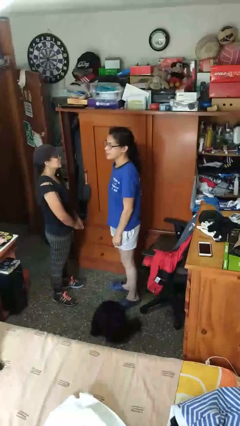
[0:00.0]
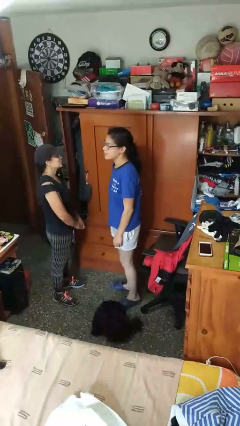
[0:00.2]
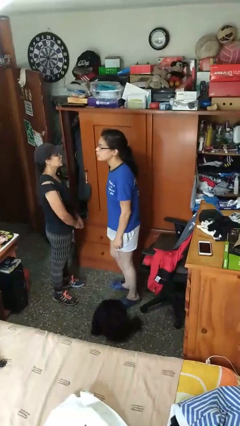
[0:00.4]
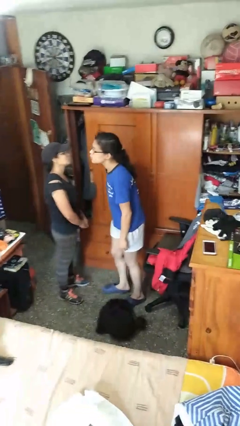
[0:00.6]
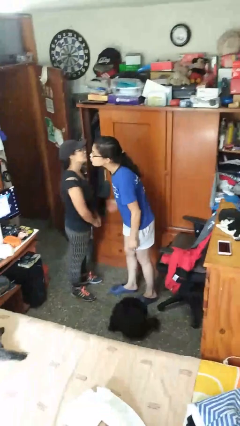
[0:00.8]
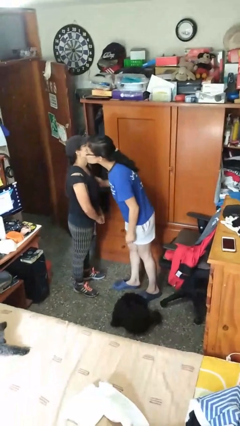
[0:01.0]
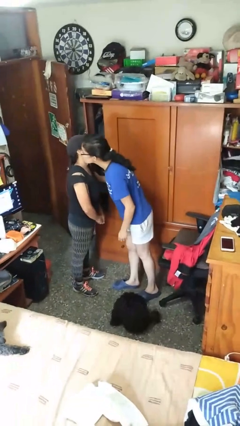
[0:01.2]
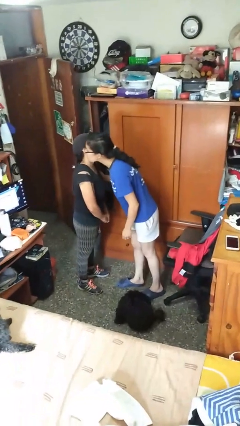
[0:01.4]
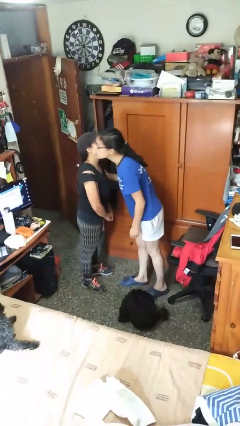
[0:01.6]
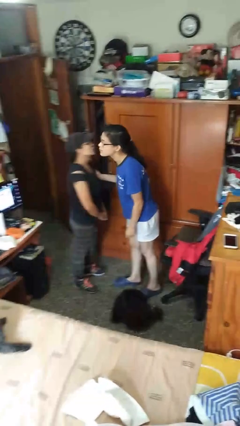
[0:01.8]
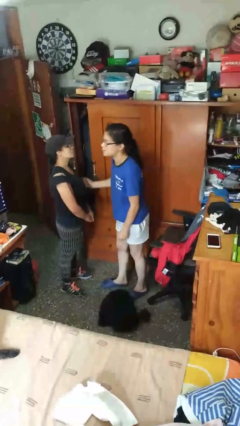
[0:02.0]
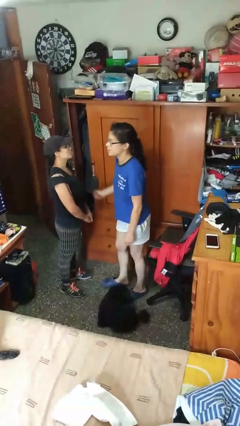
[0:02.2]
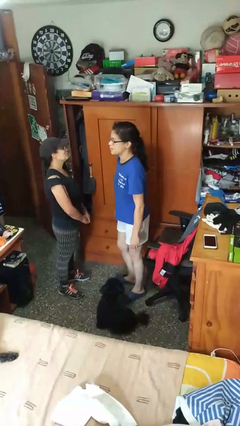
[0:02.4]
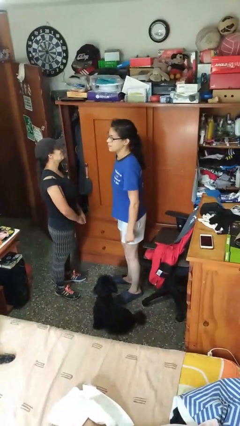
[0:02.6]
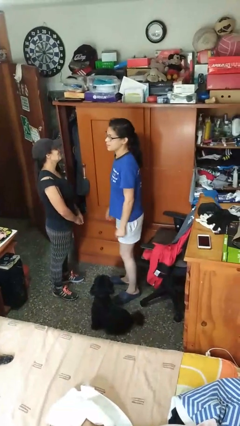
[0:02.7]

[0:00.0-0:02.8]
person kisses cheek of person

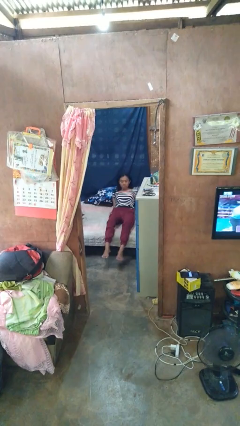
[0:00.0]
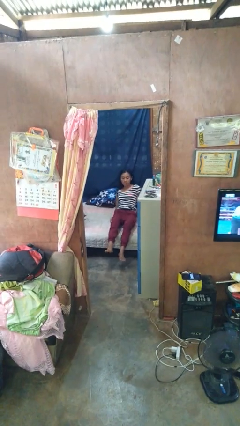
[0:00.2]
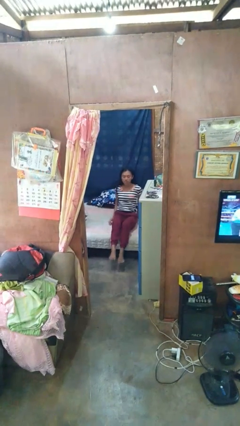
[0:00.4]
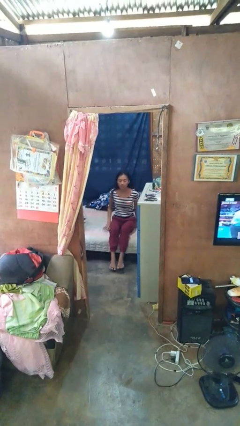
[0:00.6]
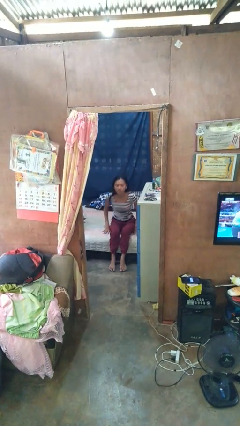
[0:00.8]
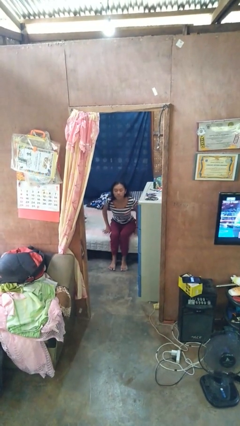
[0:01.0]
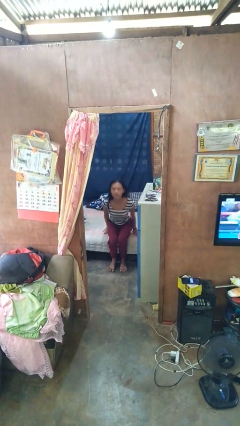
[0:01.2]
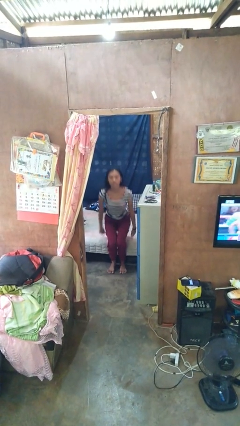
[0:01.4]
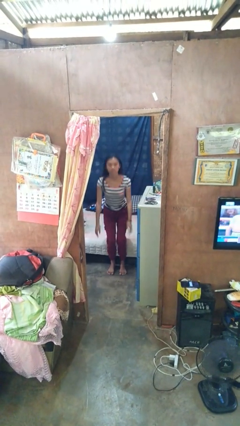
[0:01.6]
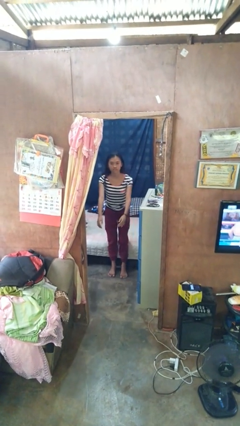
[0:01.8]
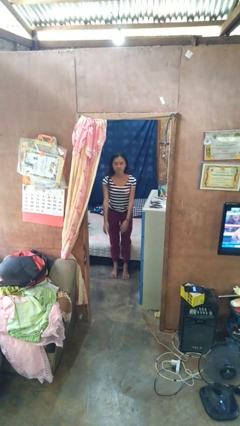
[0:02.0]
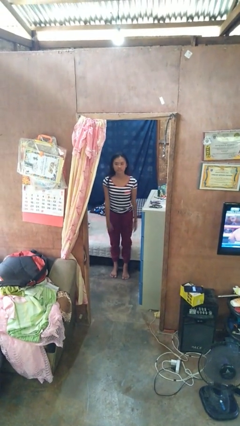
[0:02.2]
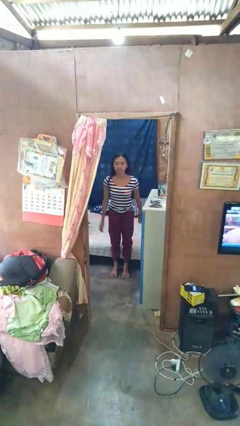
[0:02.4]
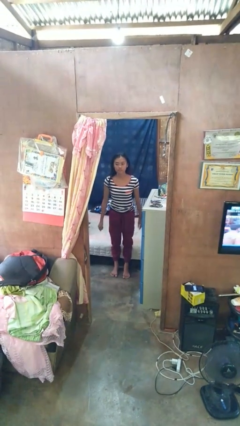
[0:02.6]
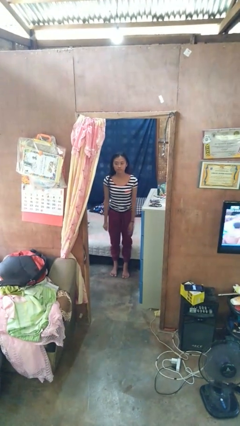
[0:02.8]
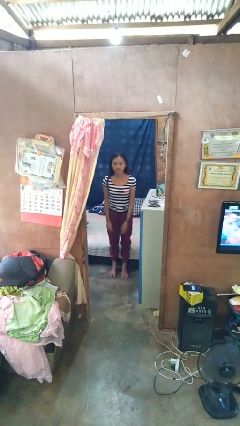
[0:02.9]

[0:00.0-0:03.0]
person stands up

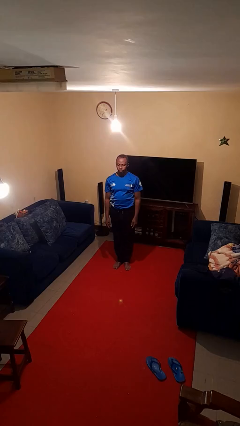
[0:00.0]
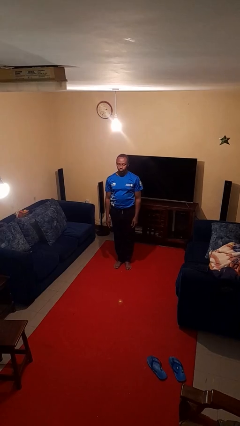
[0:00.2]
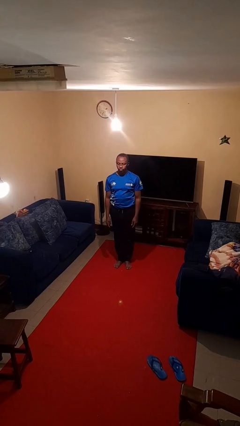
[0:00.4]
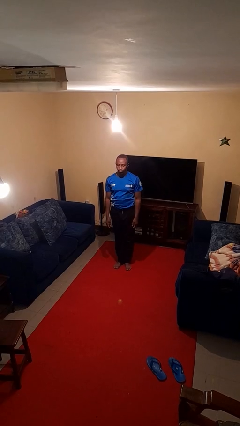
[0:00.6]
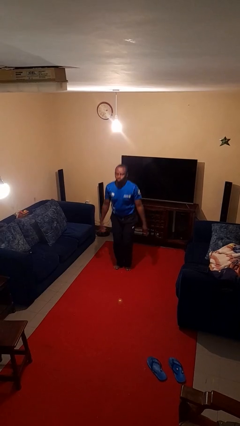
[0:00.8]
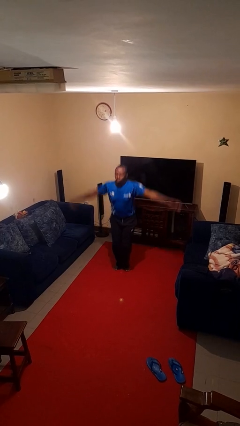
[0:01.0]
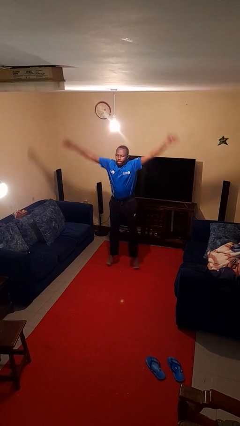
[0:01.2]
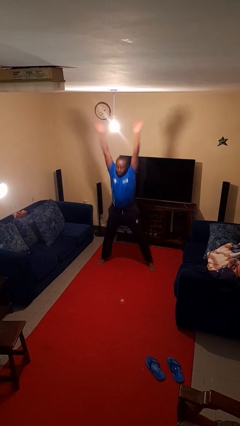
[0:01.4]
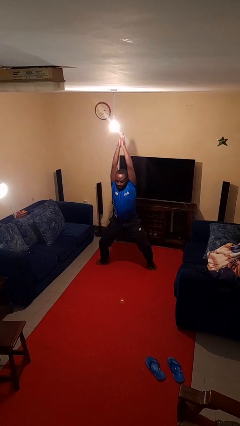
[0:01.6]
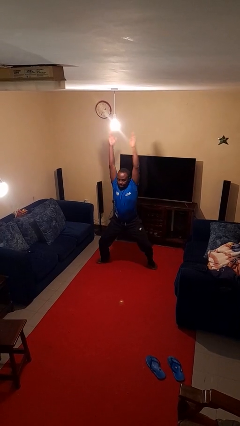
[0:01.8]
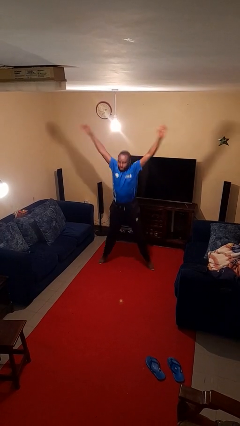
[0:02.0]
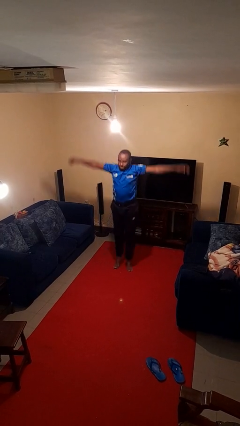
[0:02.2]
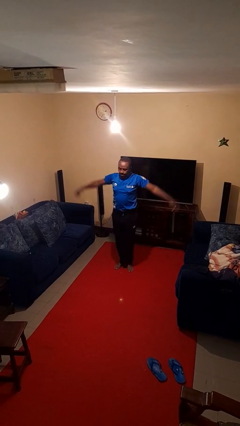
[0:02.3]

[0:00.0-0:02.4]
person exercises with jumping jacks

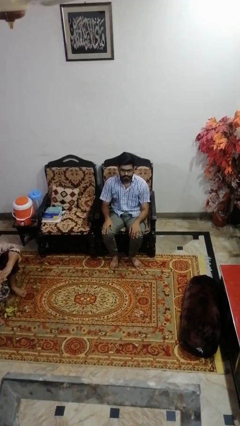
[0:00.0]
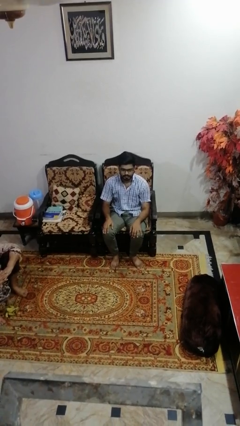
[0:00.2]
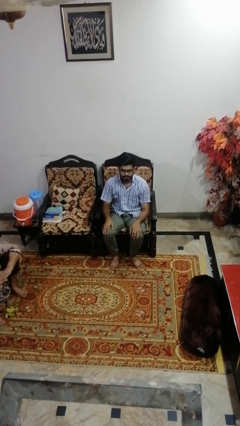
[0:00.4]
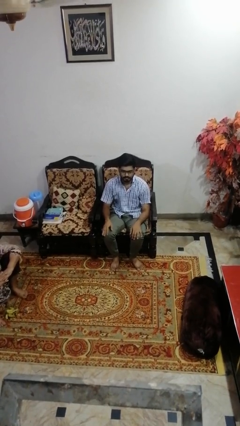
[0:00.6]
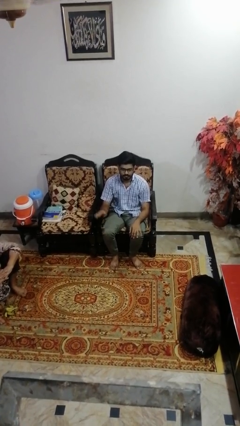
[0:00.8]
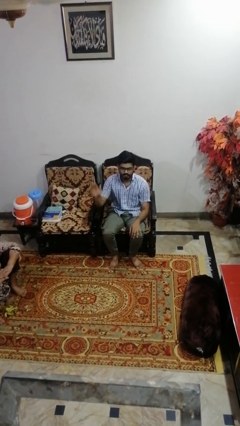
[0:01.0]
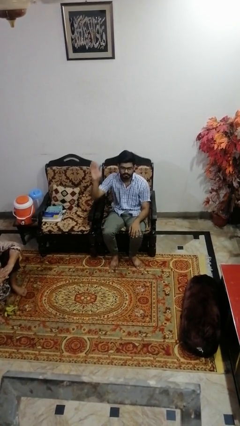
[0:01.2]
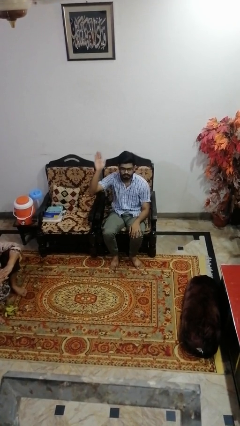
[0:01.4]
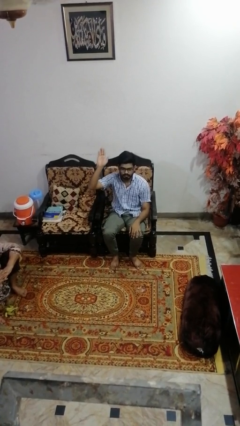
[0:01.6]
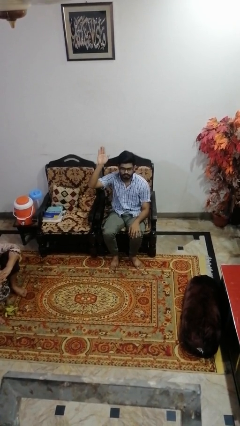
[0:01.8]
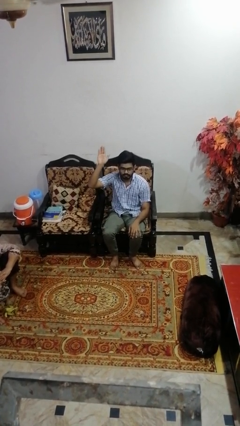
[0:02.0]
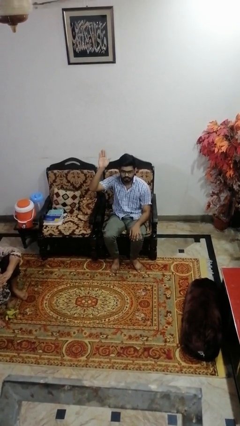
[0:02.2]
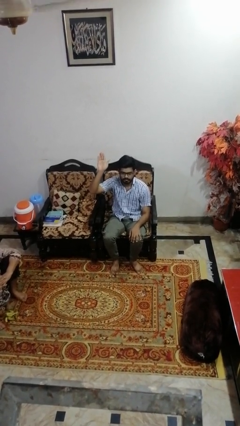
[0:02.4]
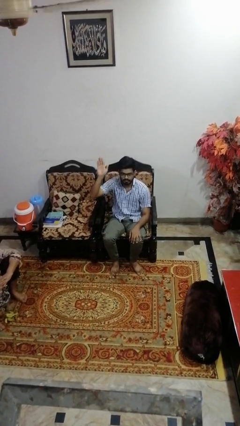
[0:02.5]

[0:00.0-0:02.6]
person gestures raise hand

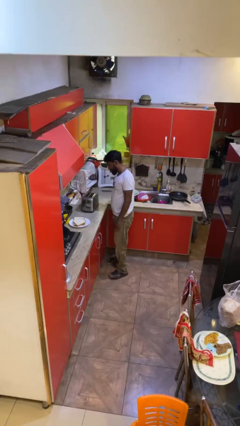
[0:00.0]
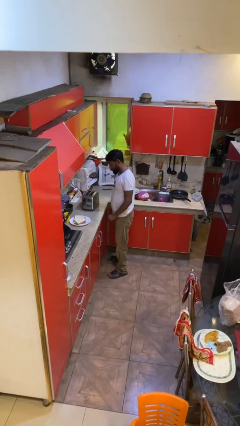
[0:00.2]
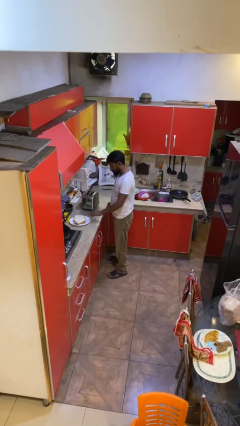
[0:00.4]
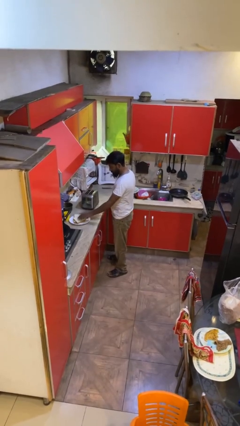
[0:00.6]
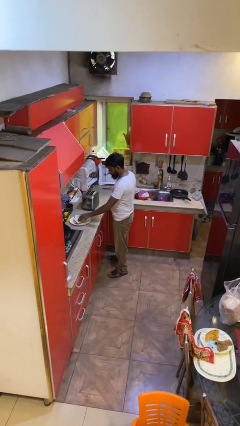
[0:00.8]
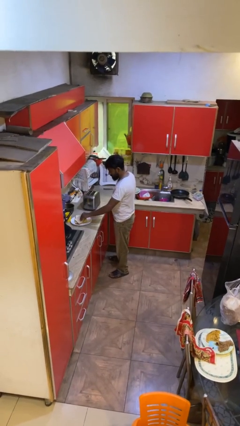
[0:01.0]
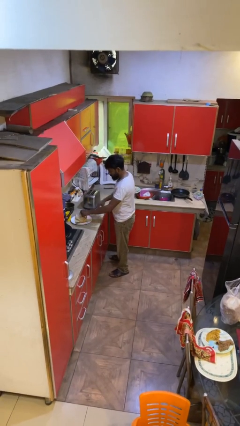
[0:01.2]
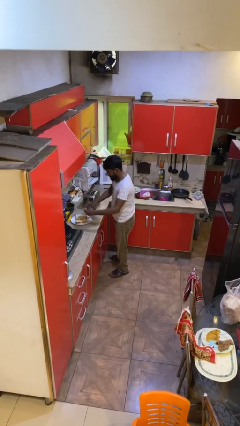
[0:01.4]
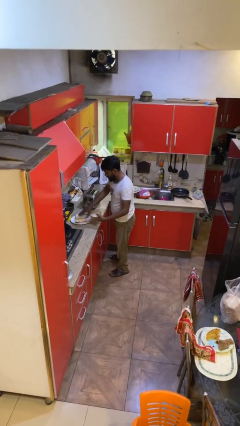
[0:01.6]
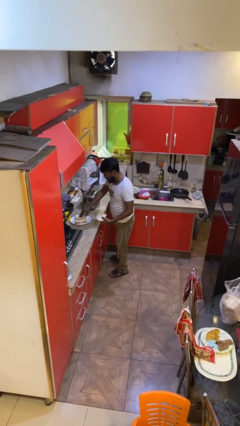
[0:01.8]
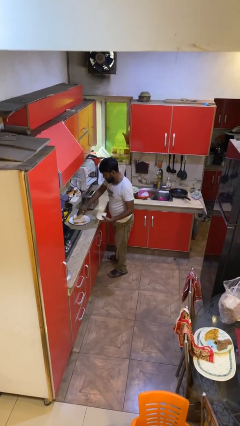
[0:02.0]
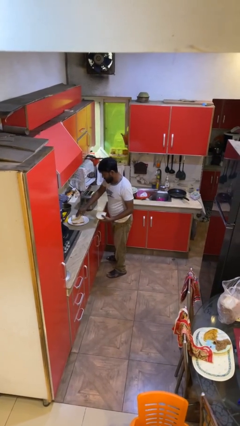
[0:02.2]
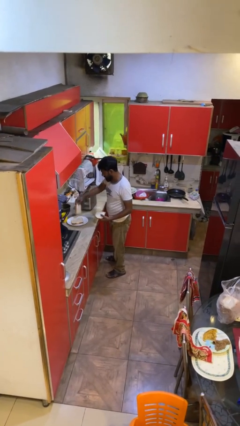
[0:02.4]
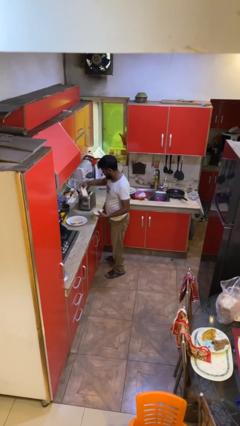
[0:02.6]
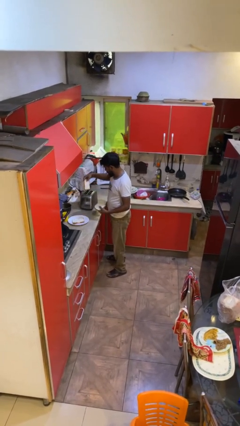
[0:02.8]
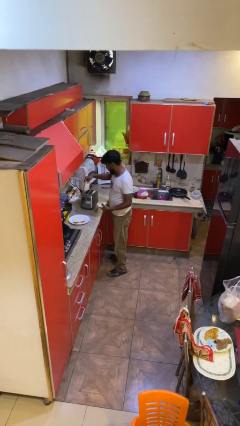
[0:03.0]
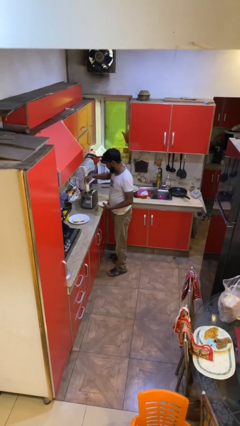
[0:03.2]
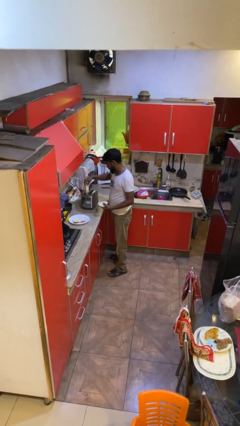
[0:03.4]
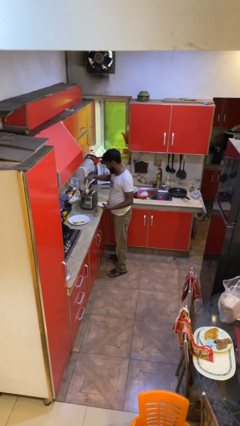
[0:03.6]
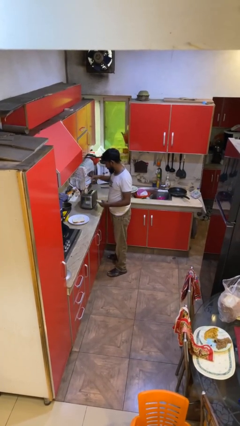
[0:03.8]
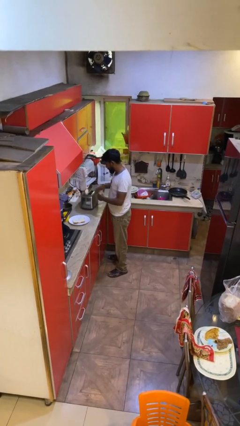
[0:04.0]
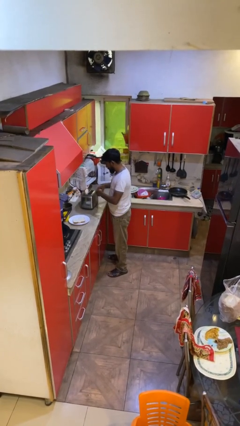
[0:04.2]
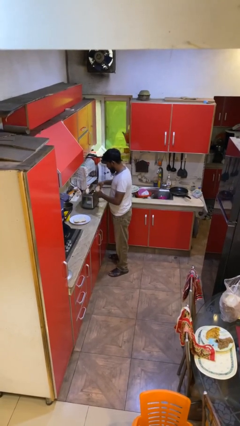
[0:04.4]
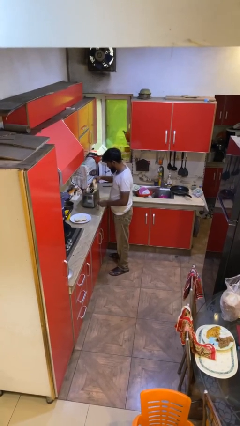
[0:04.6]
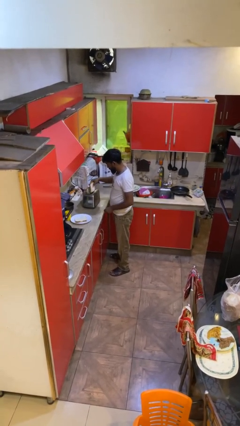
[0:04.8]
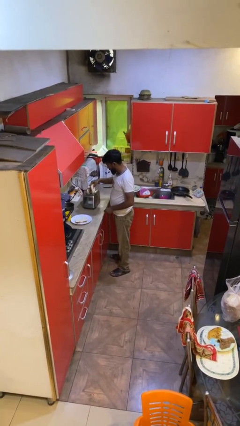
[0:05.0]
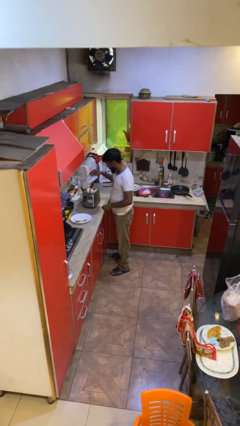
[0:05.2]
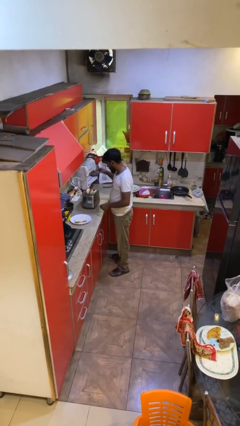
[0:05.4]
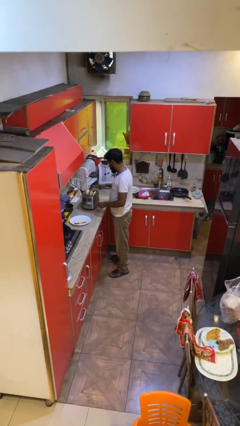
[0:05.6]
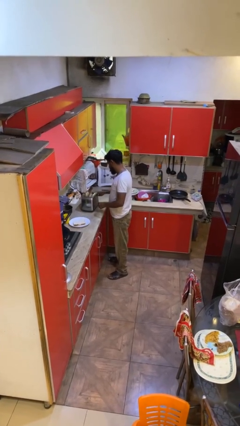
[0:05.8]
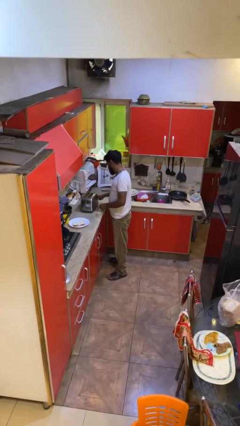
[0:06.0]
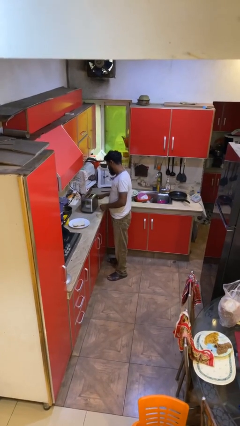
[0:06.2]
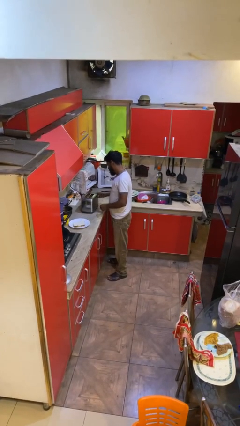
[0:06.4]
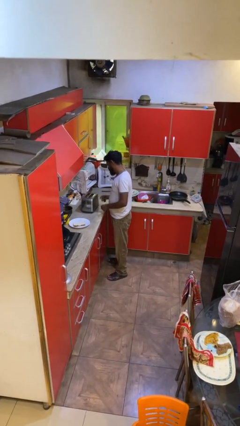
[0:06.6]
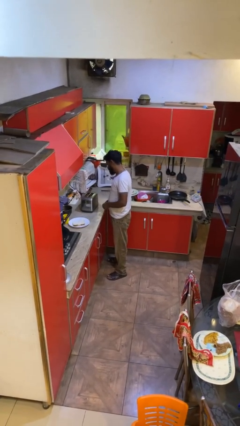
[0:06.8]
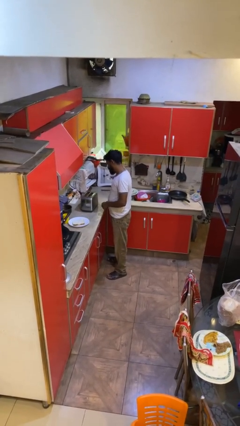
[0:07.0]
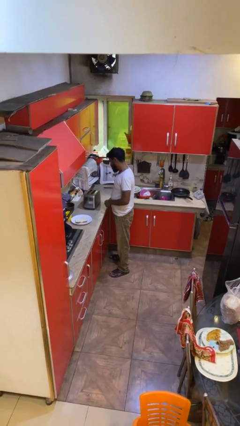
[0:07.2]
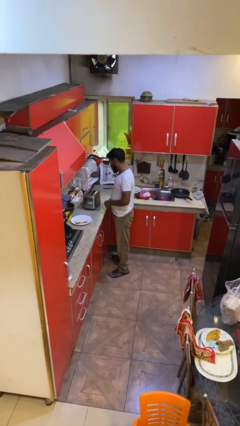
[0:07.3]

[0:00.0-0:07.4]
person puts object into toaster
